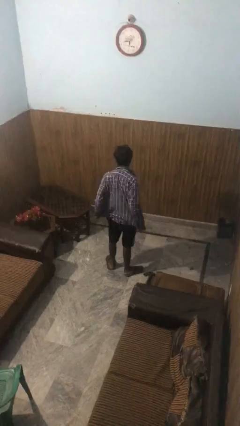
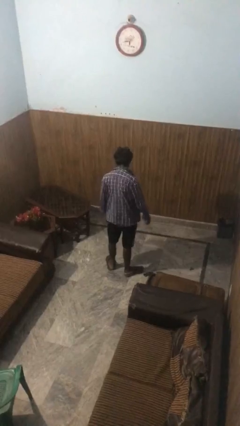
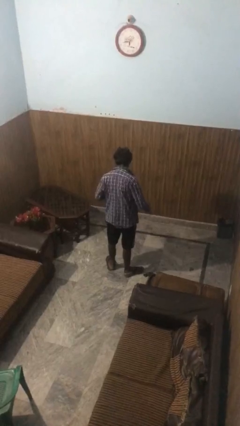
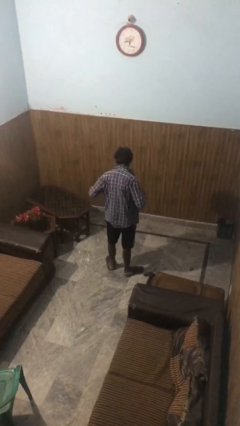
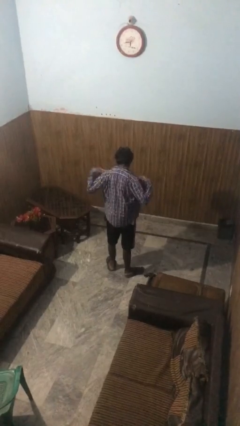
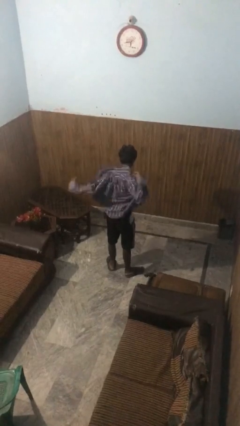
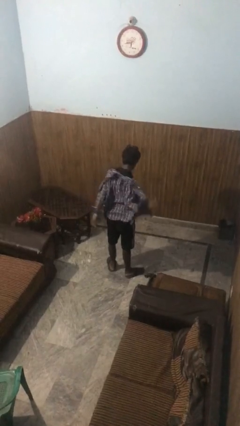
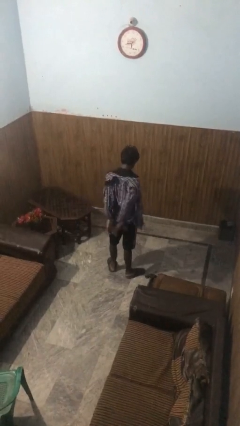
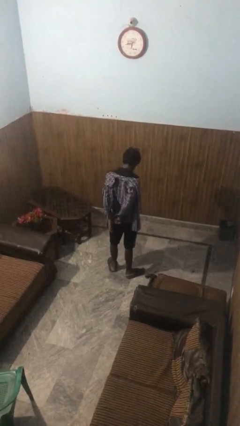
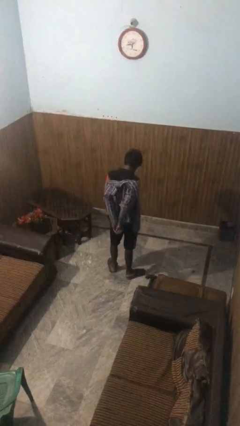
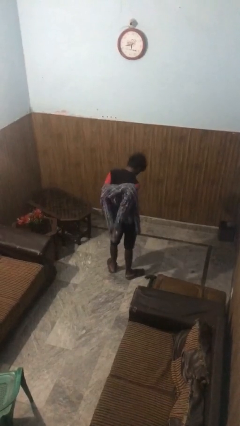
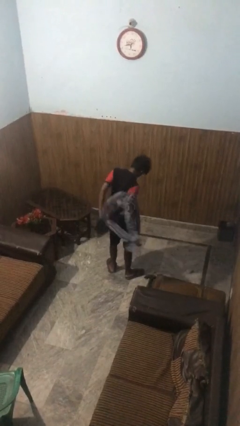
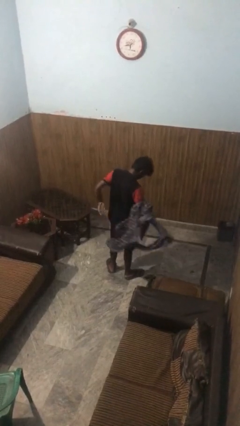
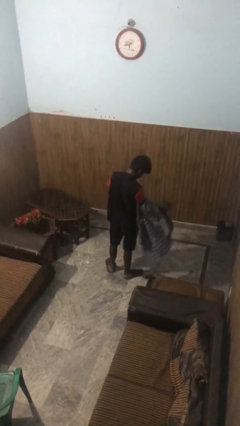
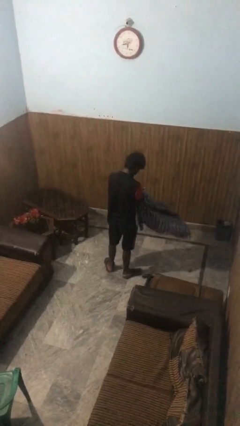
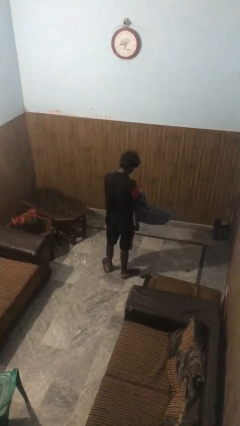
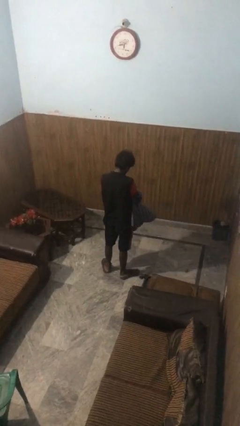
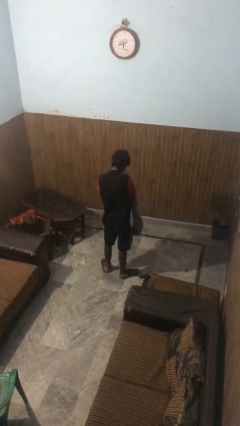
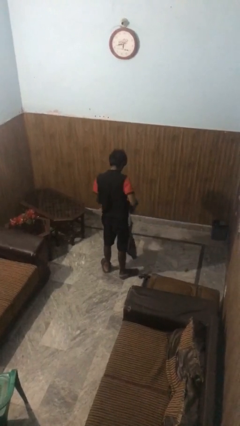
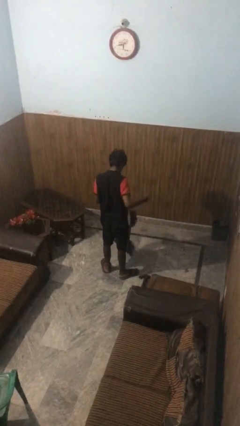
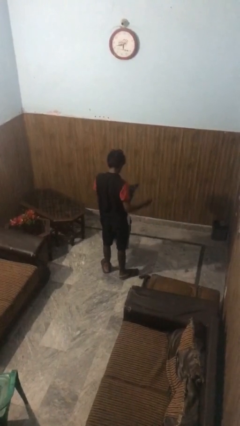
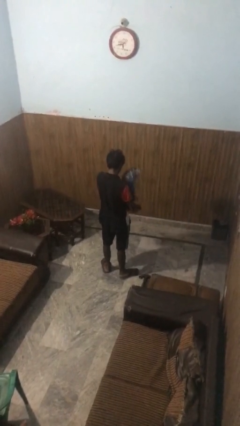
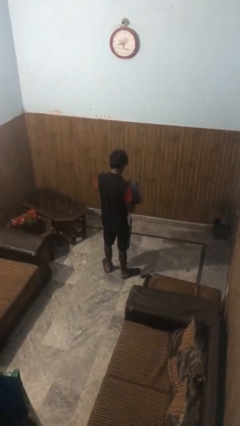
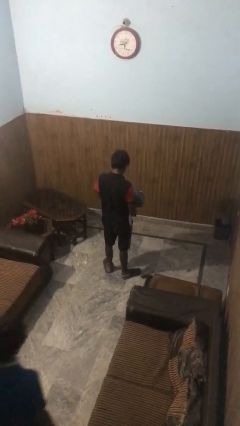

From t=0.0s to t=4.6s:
person takes off shirt

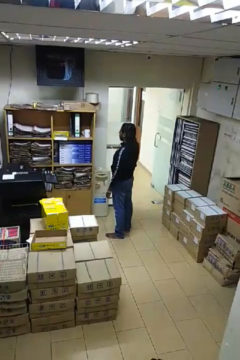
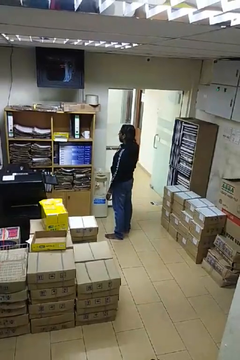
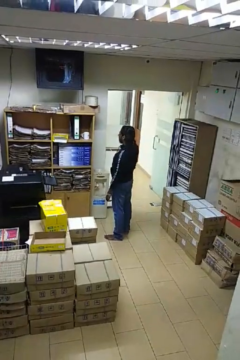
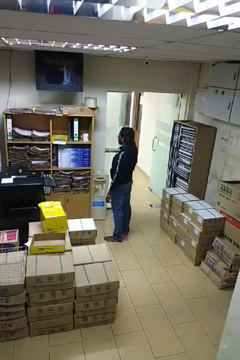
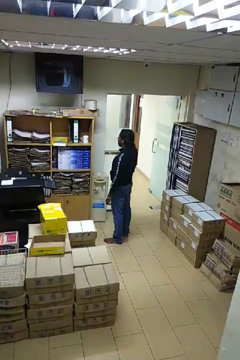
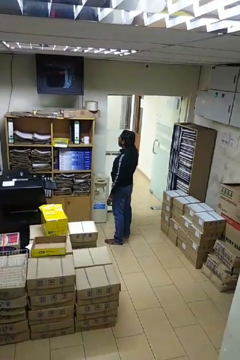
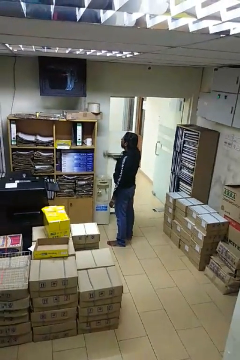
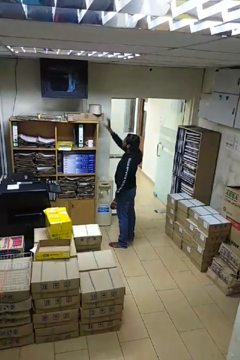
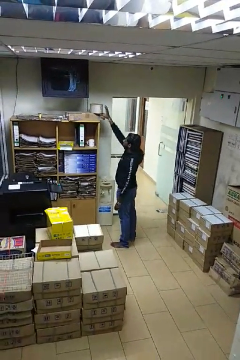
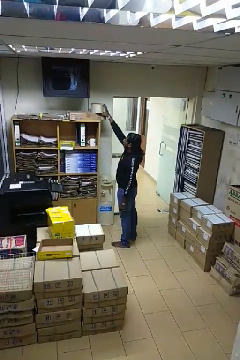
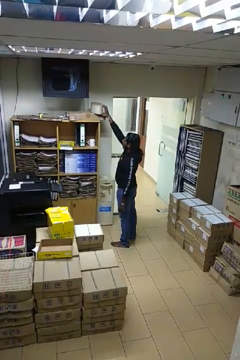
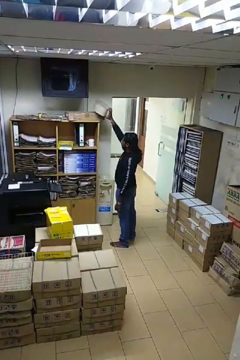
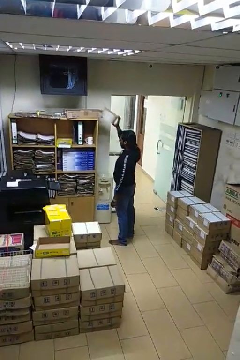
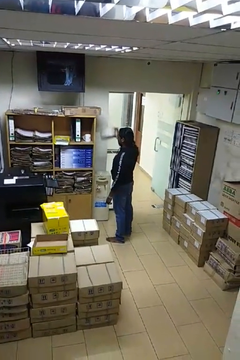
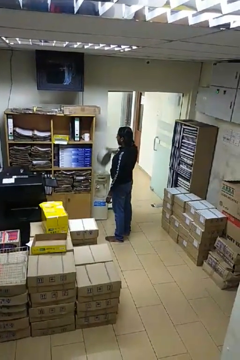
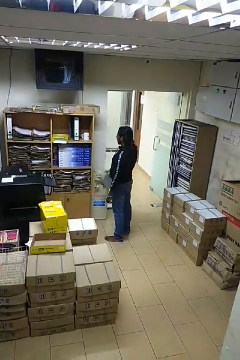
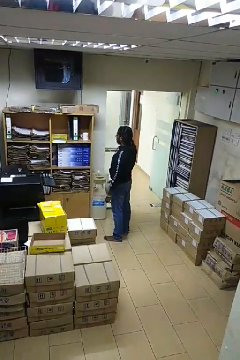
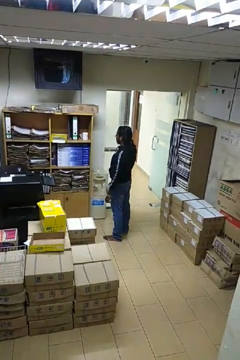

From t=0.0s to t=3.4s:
person picks up object from shelf

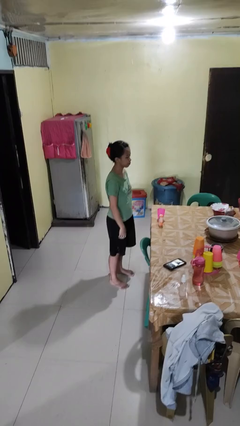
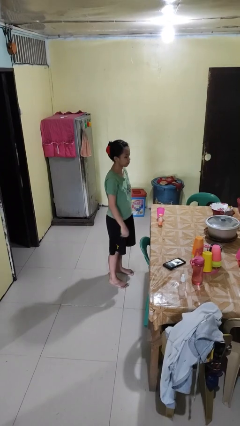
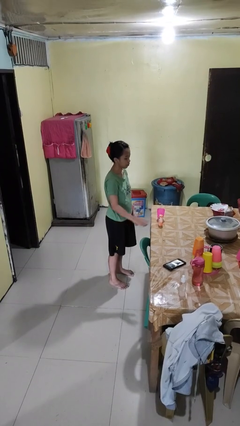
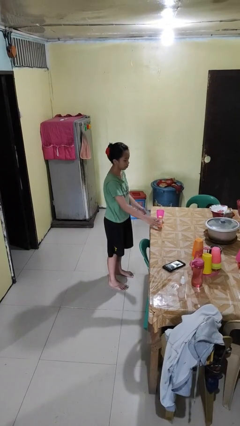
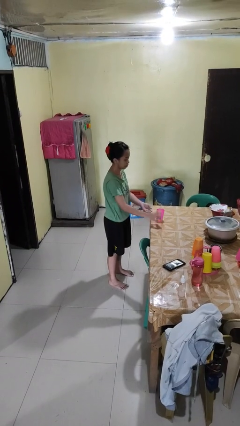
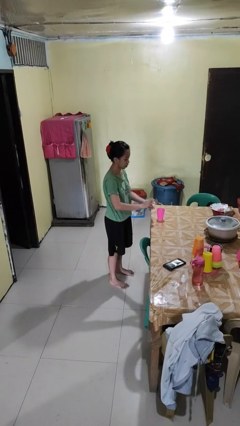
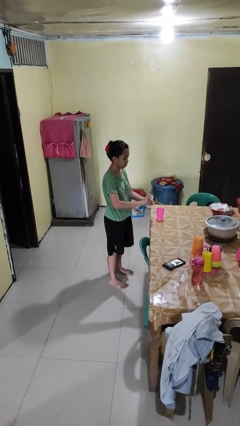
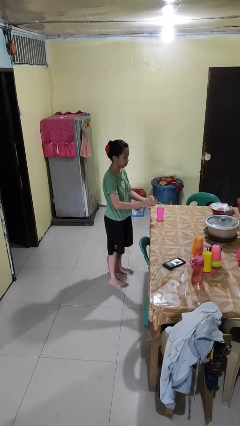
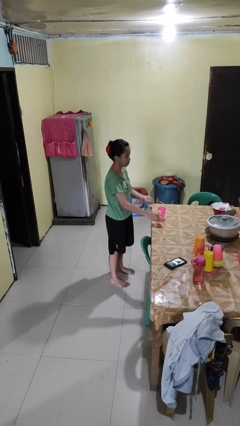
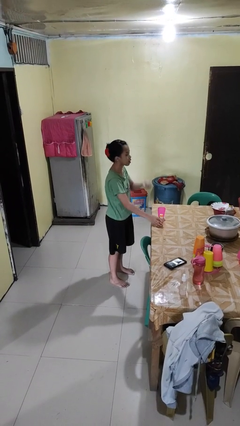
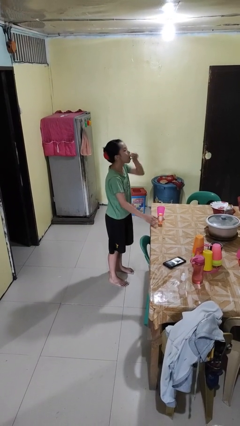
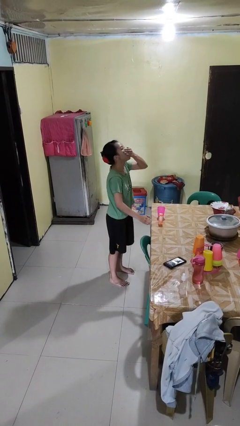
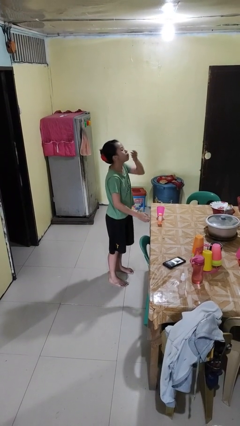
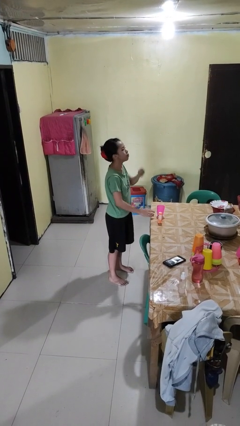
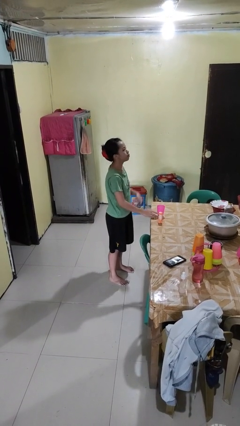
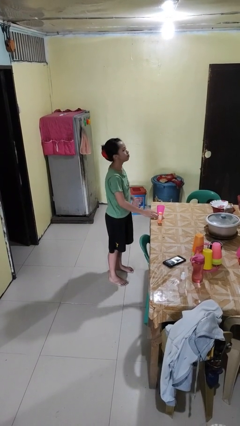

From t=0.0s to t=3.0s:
person takes medicine pills

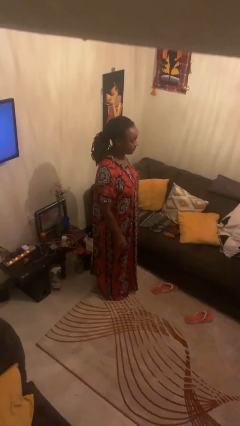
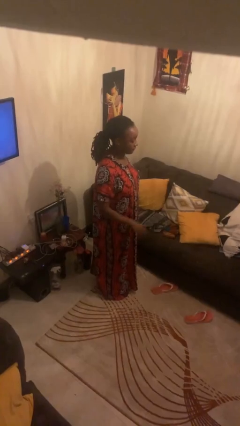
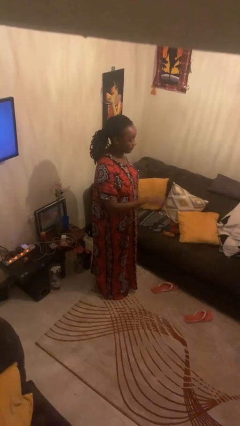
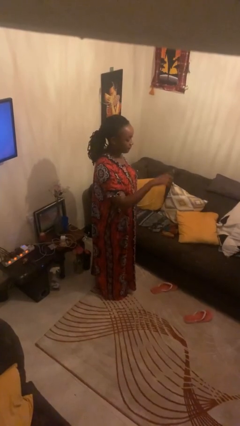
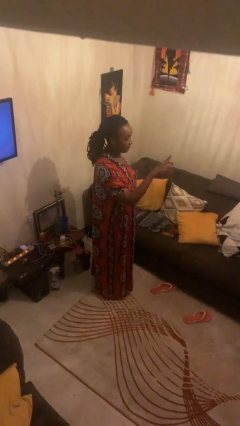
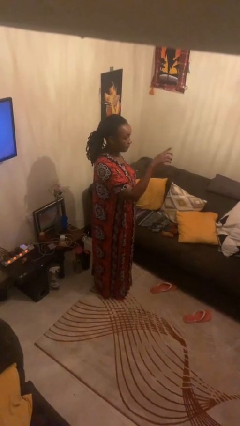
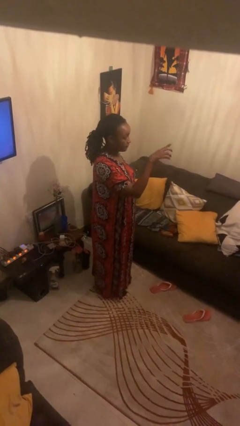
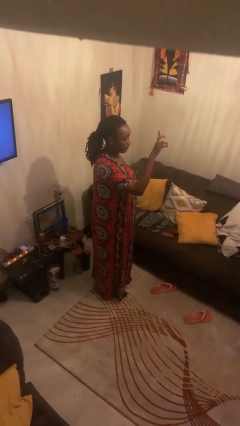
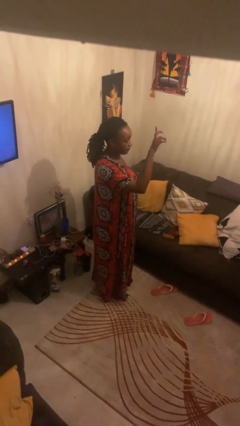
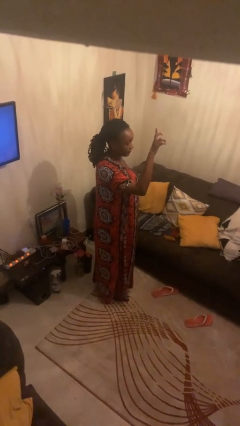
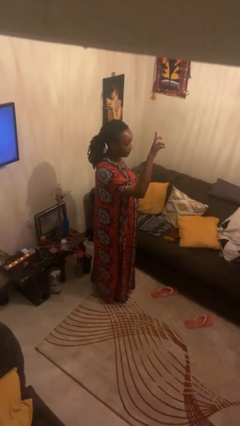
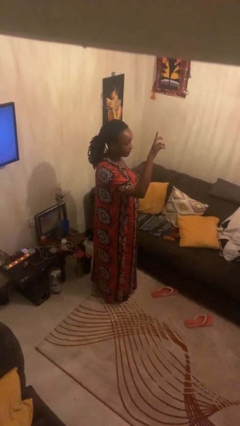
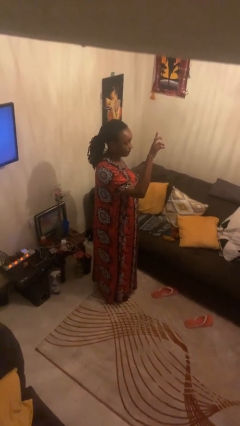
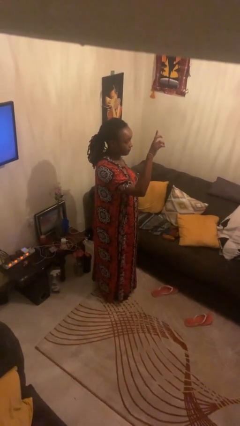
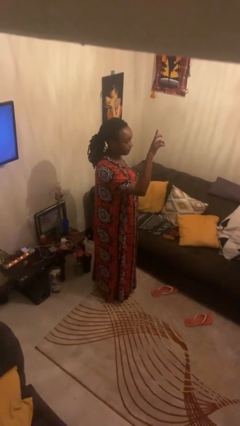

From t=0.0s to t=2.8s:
person gestures swipe up

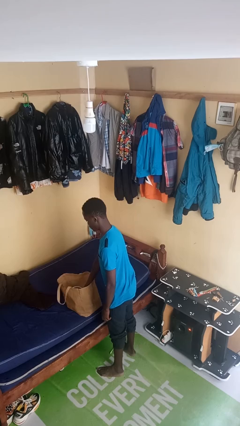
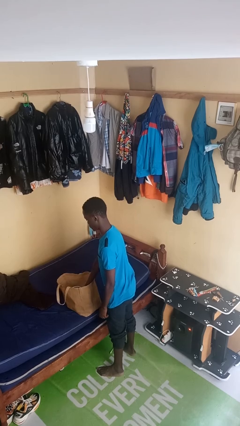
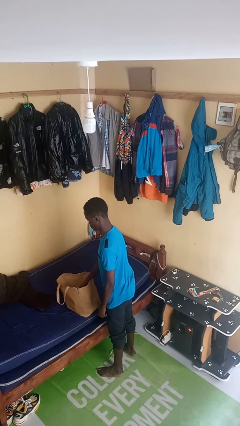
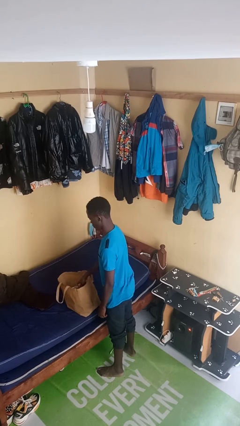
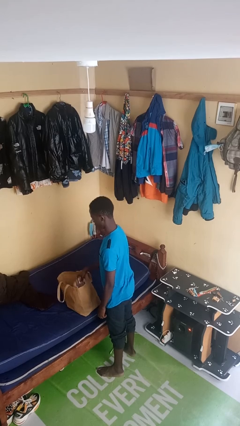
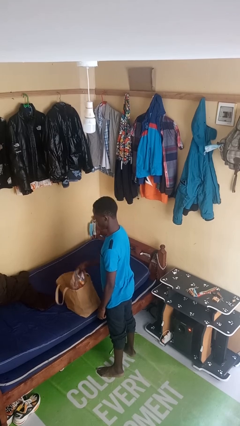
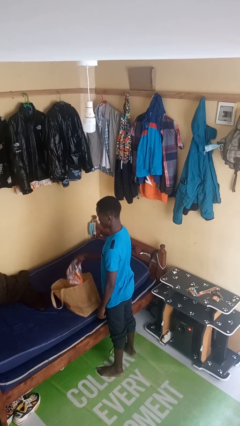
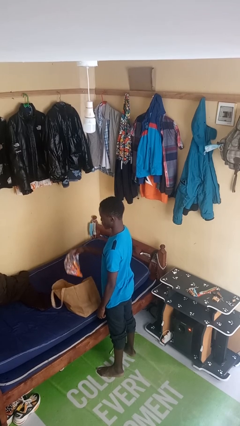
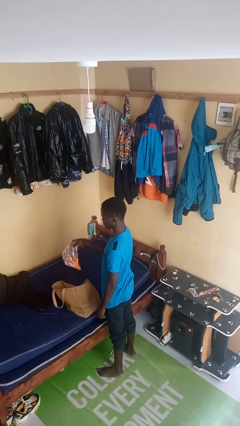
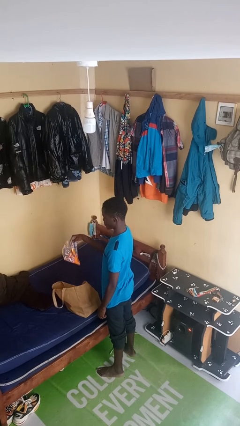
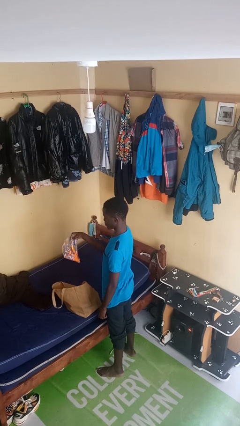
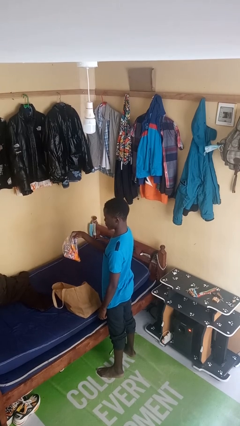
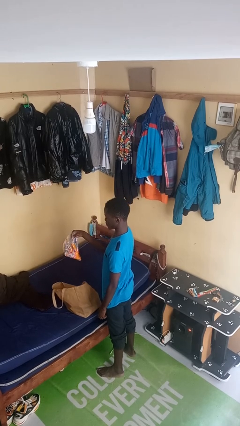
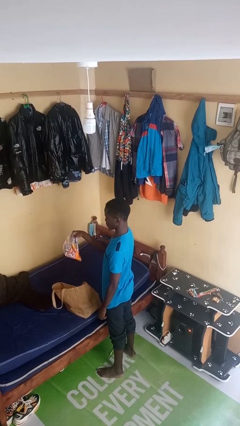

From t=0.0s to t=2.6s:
person takes object from bag

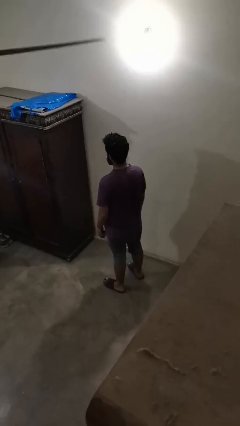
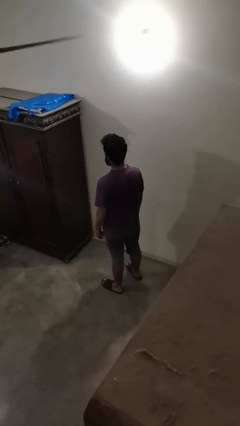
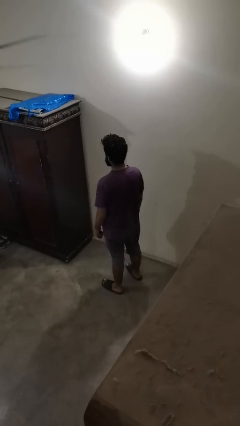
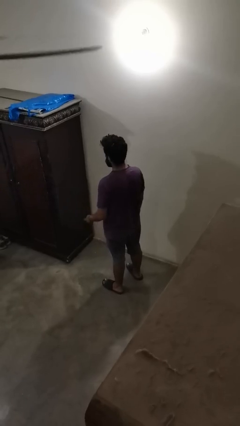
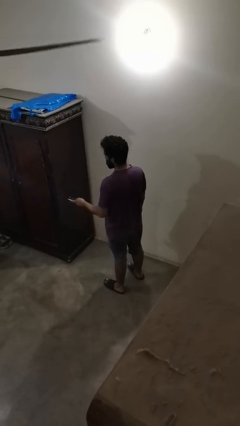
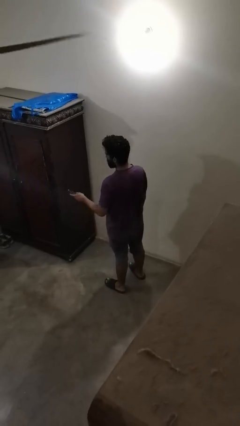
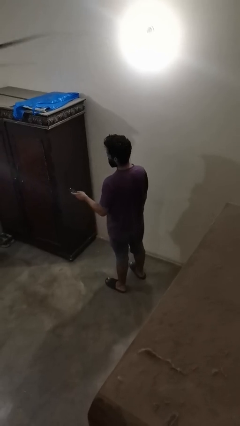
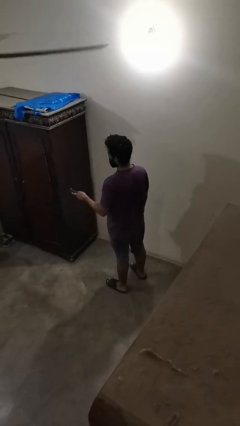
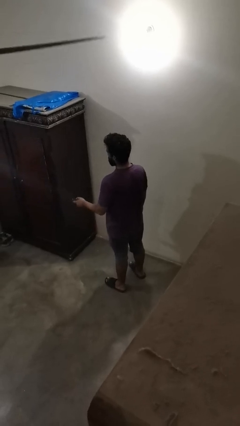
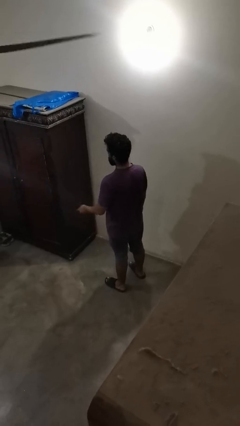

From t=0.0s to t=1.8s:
person uses television remote
